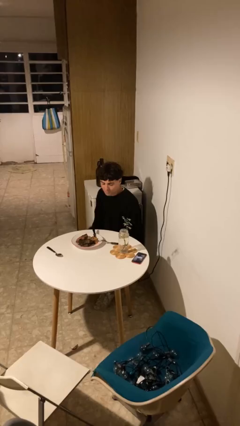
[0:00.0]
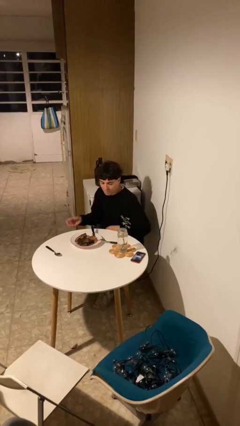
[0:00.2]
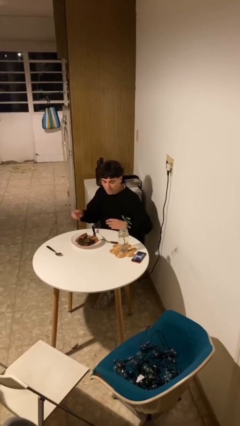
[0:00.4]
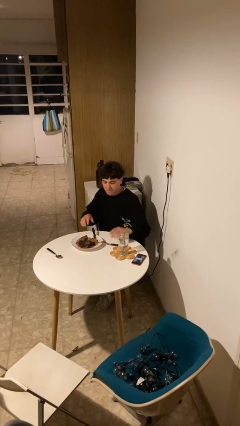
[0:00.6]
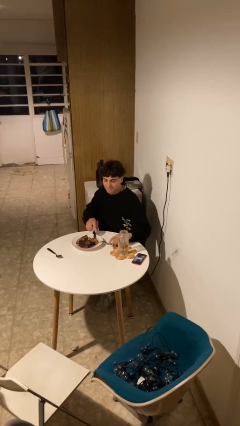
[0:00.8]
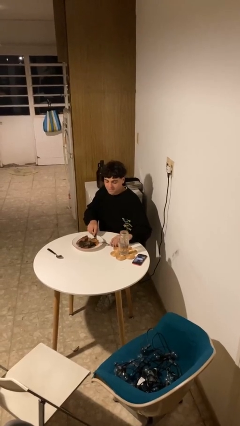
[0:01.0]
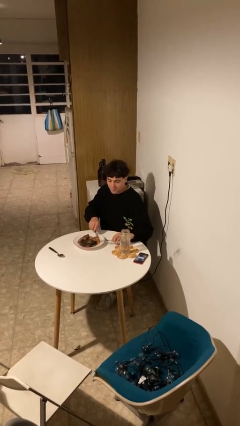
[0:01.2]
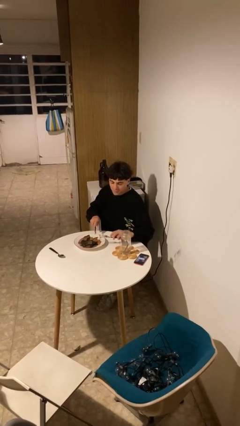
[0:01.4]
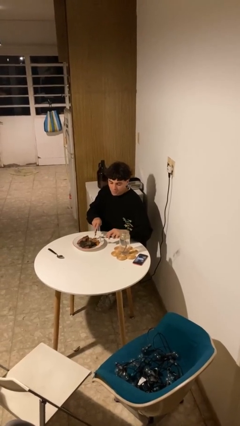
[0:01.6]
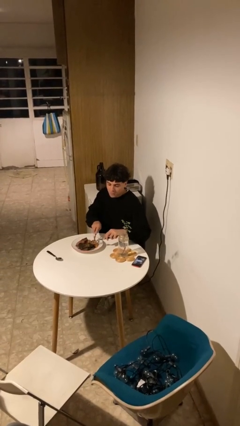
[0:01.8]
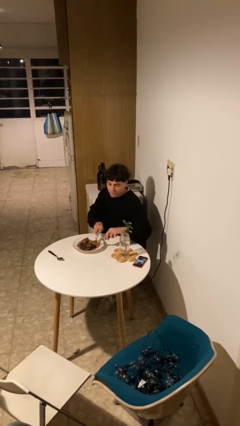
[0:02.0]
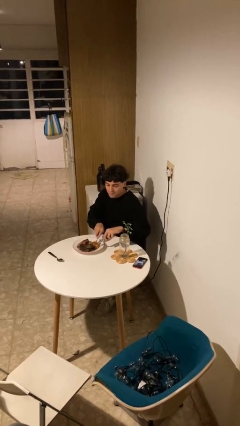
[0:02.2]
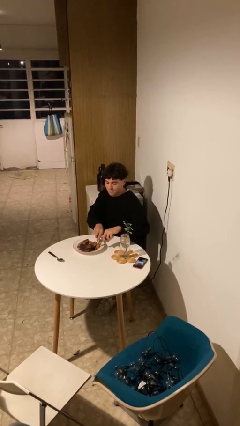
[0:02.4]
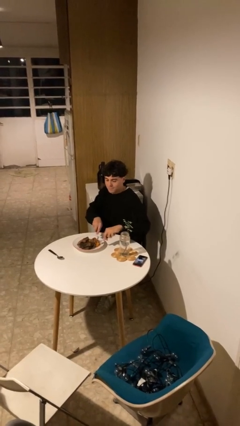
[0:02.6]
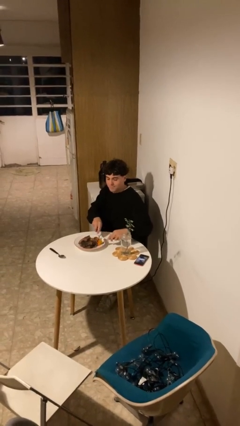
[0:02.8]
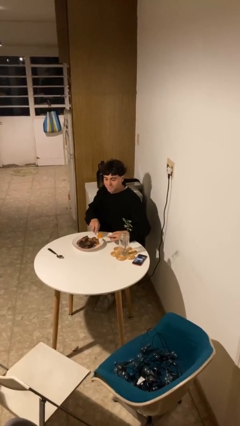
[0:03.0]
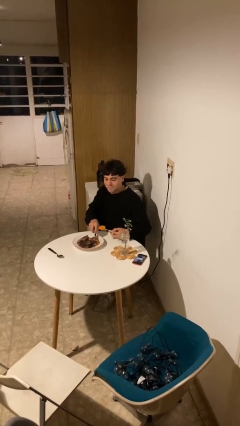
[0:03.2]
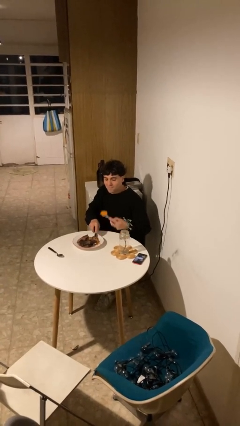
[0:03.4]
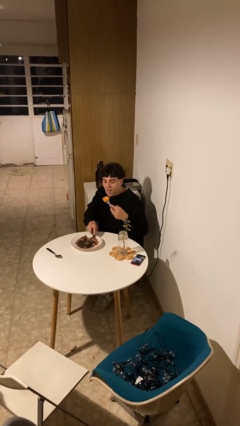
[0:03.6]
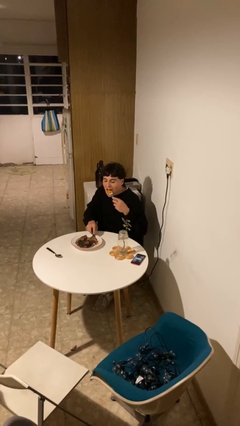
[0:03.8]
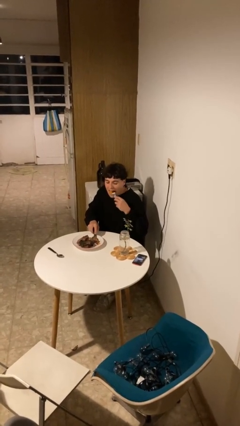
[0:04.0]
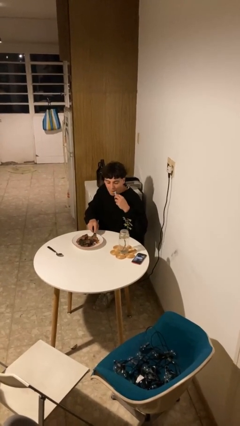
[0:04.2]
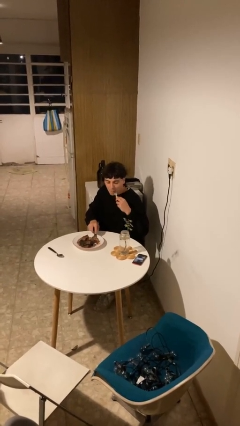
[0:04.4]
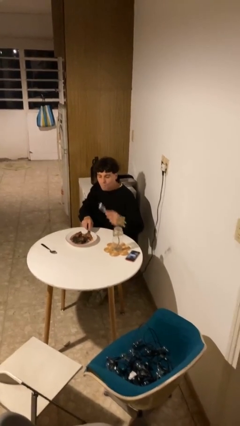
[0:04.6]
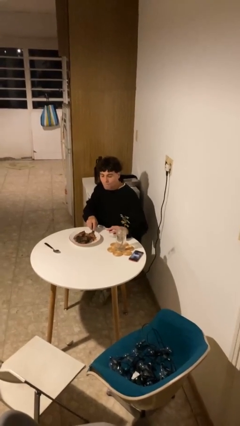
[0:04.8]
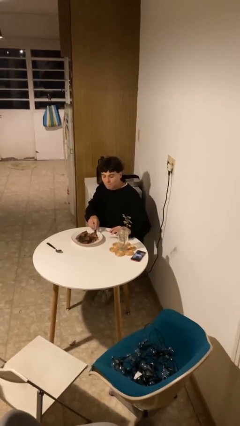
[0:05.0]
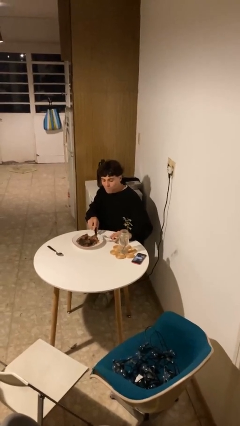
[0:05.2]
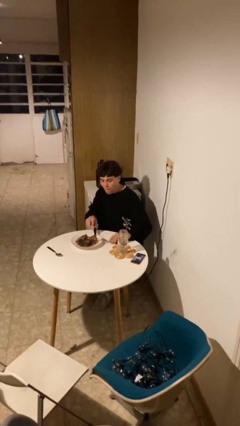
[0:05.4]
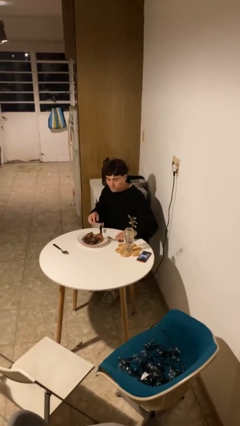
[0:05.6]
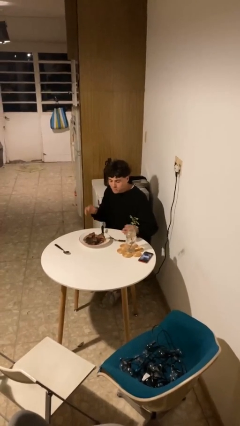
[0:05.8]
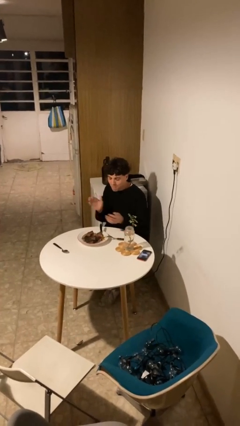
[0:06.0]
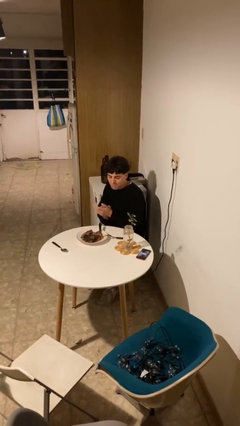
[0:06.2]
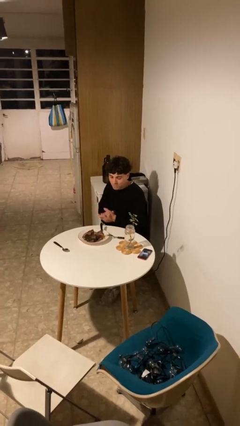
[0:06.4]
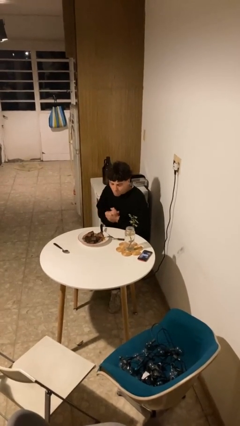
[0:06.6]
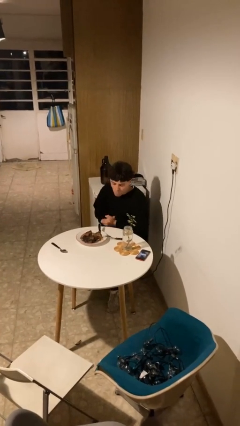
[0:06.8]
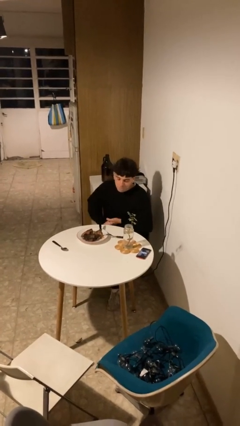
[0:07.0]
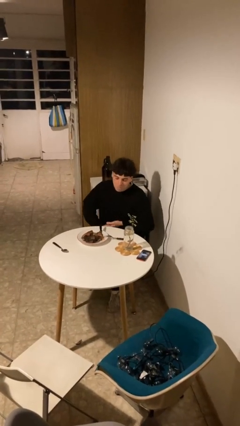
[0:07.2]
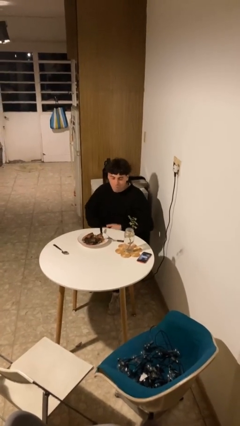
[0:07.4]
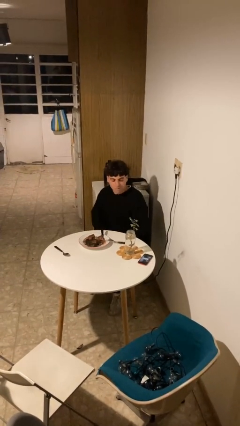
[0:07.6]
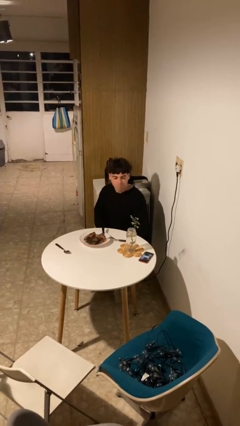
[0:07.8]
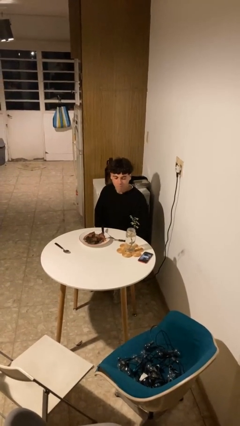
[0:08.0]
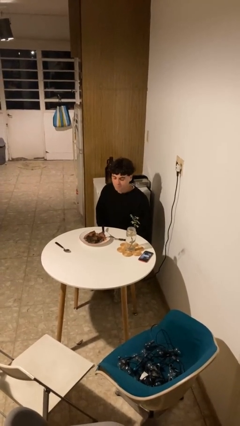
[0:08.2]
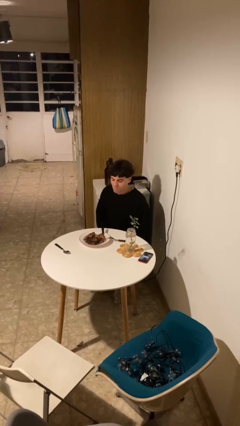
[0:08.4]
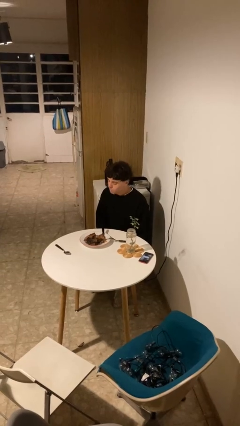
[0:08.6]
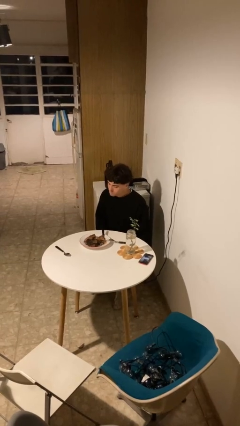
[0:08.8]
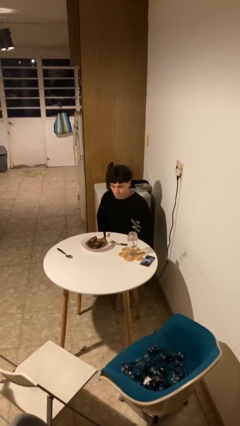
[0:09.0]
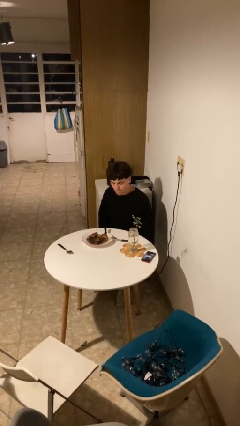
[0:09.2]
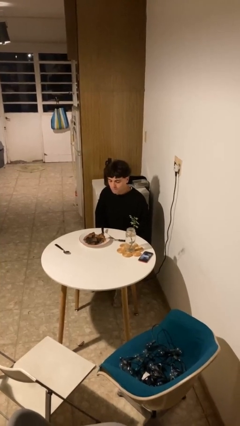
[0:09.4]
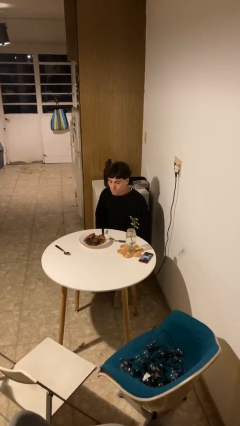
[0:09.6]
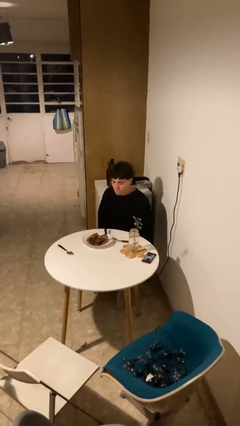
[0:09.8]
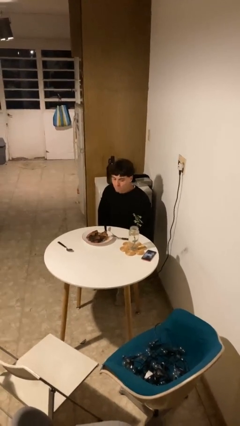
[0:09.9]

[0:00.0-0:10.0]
person eats with utensil

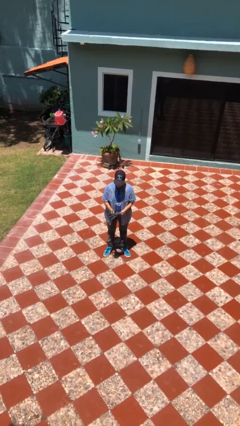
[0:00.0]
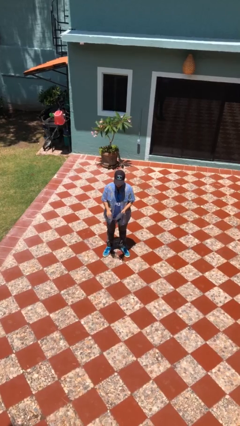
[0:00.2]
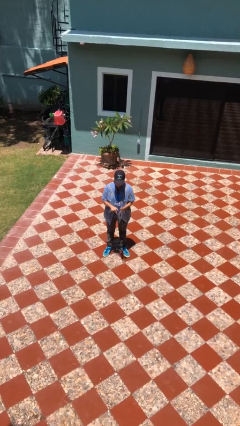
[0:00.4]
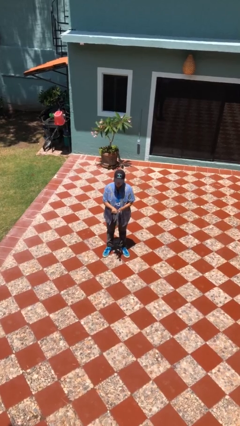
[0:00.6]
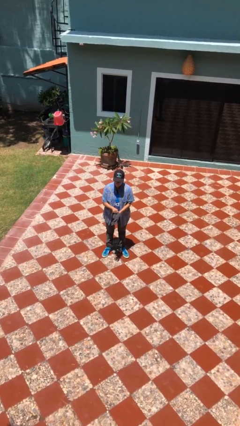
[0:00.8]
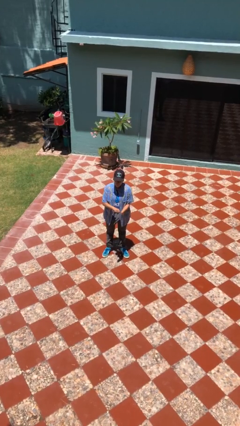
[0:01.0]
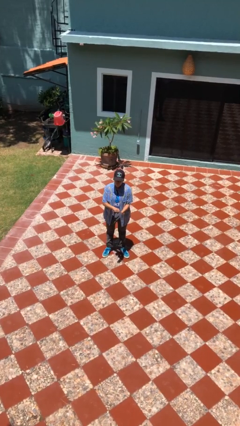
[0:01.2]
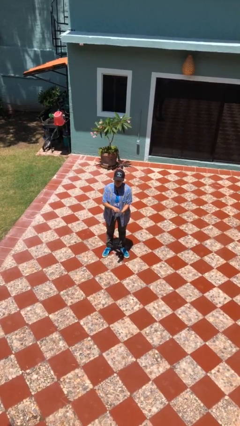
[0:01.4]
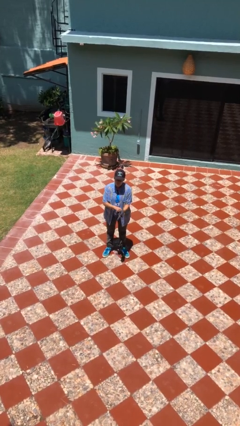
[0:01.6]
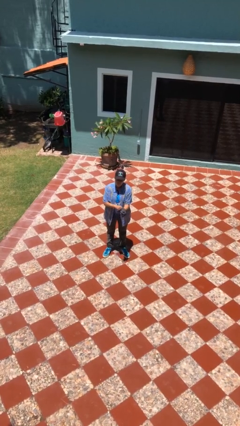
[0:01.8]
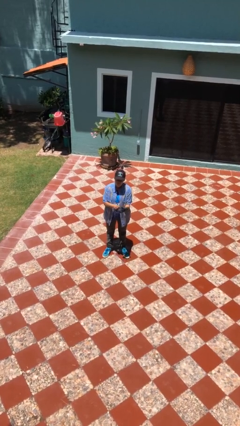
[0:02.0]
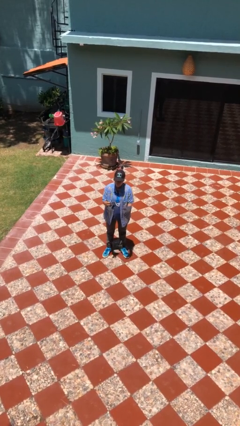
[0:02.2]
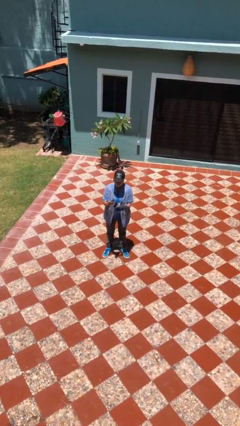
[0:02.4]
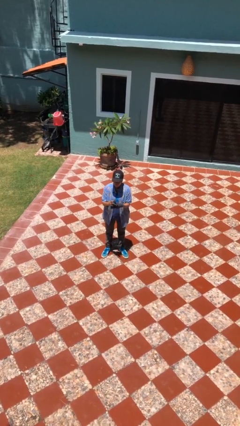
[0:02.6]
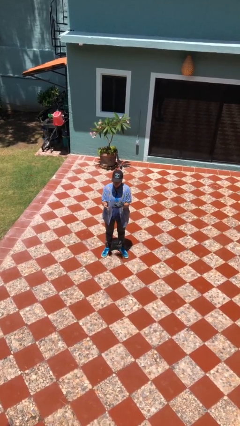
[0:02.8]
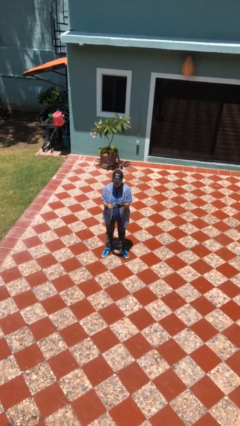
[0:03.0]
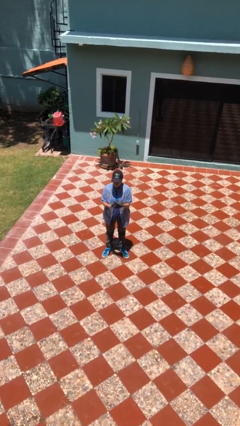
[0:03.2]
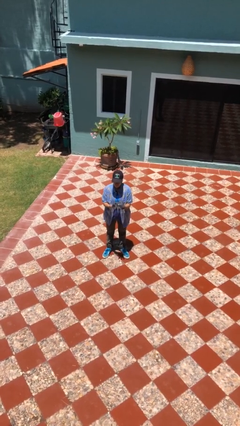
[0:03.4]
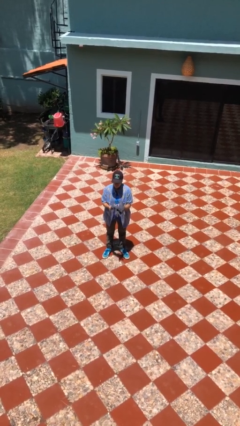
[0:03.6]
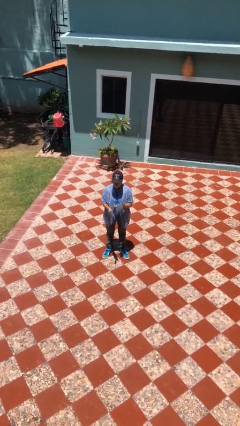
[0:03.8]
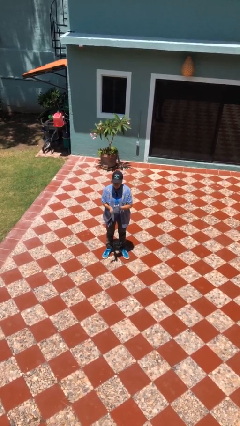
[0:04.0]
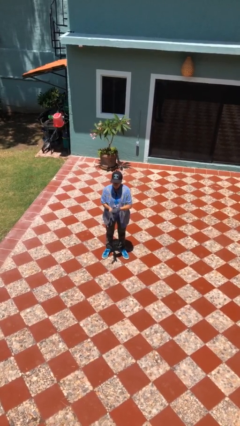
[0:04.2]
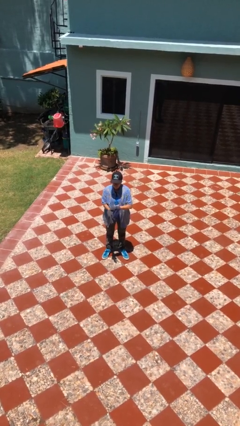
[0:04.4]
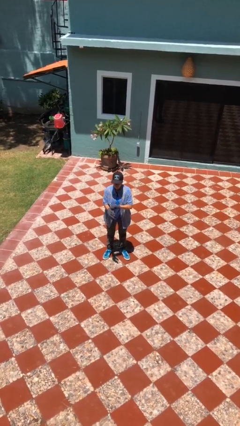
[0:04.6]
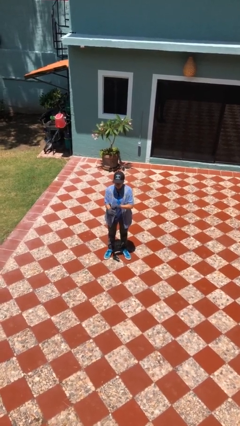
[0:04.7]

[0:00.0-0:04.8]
person puts on gloves

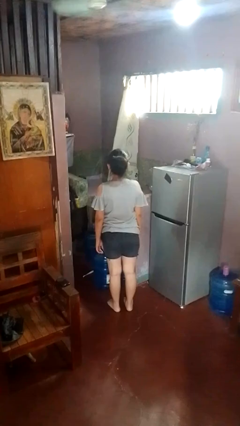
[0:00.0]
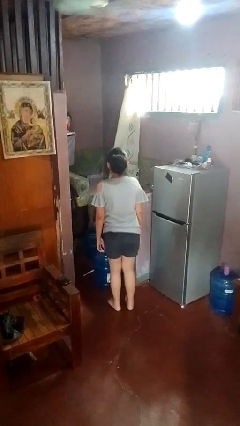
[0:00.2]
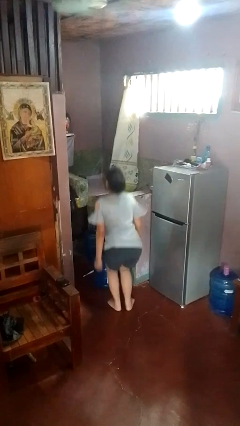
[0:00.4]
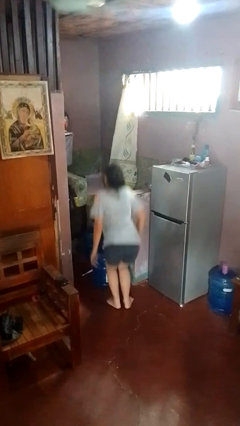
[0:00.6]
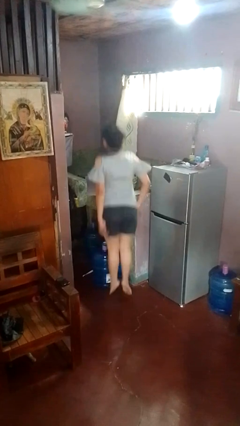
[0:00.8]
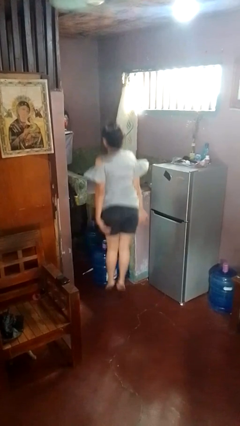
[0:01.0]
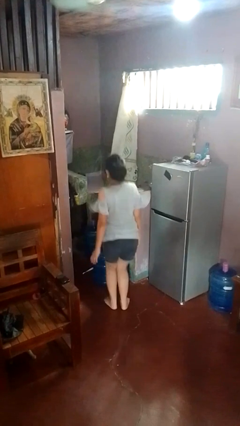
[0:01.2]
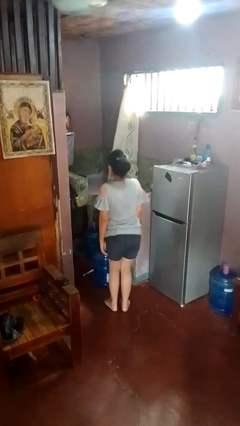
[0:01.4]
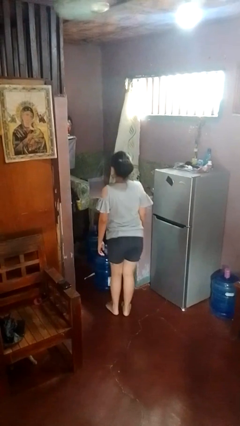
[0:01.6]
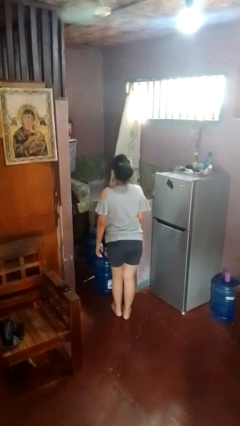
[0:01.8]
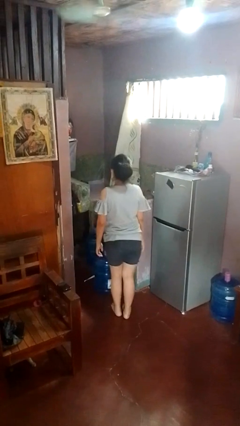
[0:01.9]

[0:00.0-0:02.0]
person jumps

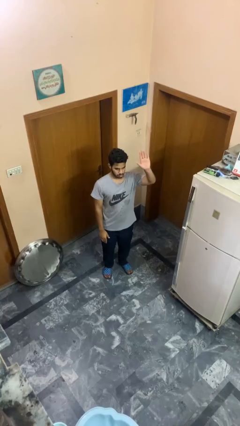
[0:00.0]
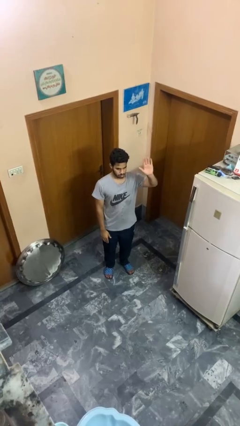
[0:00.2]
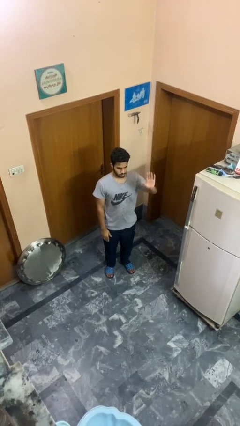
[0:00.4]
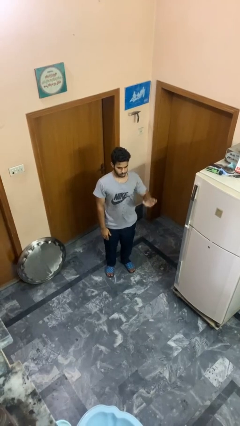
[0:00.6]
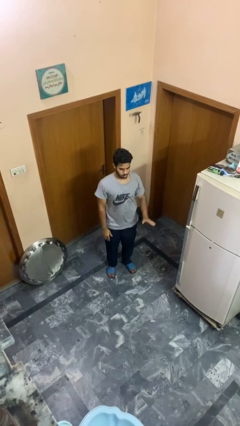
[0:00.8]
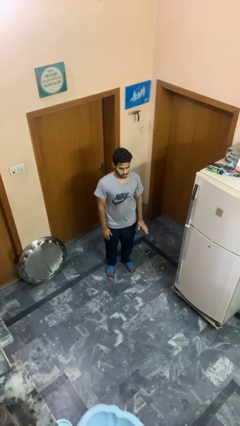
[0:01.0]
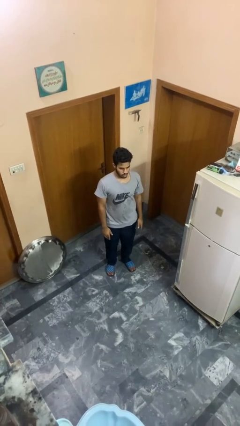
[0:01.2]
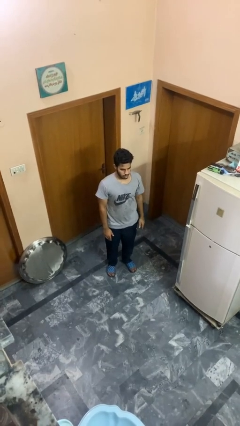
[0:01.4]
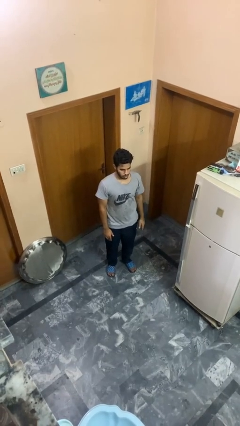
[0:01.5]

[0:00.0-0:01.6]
person gestures lower hand
